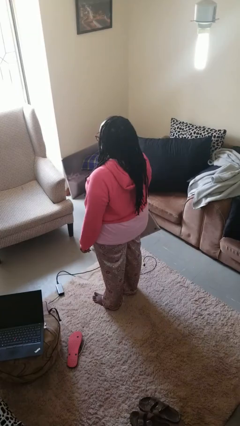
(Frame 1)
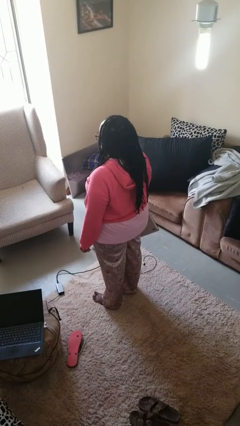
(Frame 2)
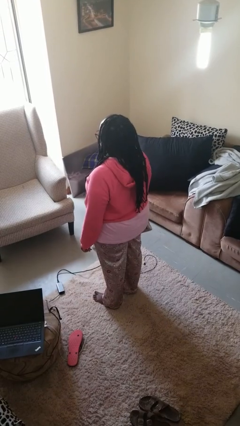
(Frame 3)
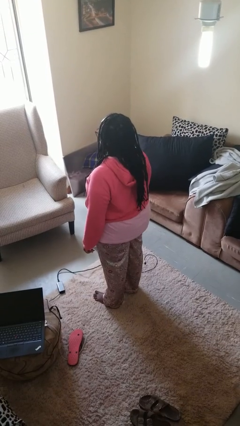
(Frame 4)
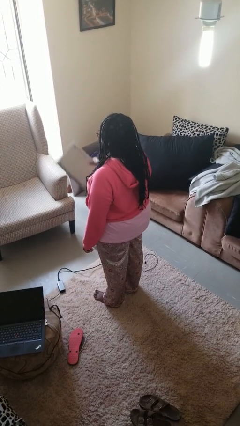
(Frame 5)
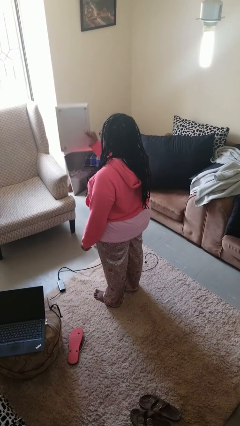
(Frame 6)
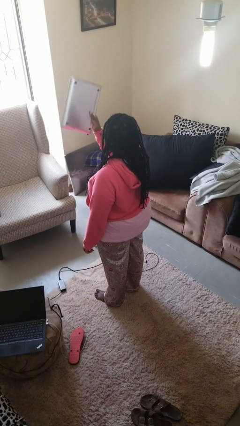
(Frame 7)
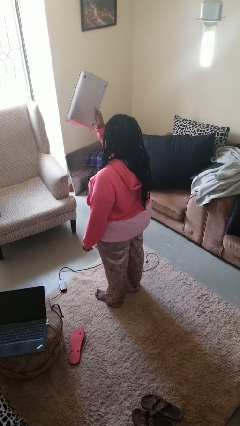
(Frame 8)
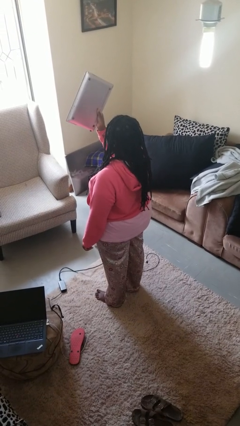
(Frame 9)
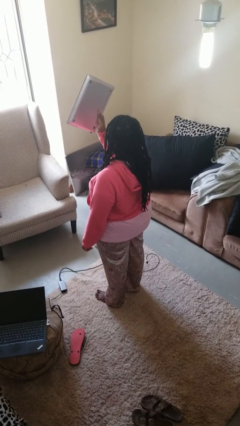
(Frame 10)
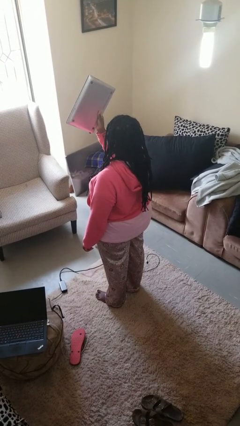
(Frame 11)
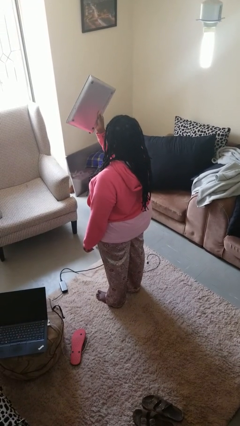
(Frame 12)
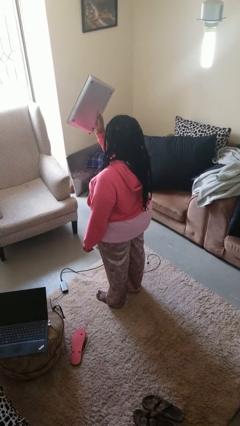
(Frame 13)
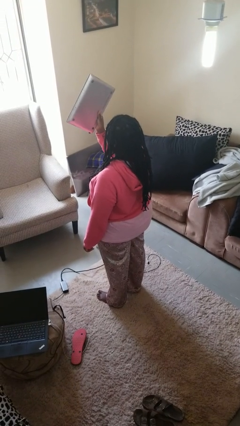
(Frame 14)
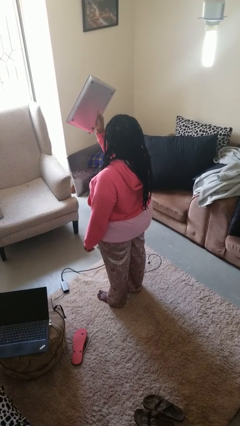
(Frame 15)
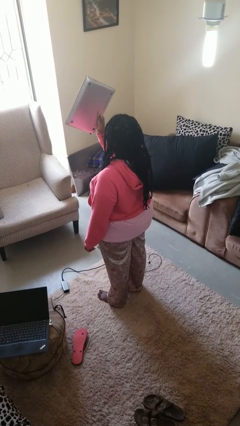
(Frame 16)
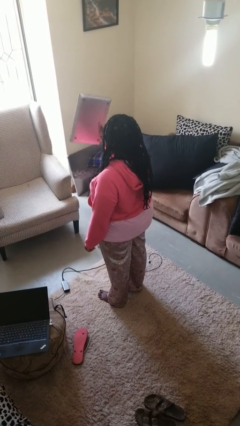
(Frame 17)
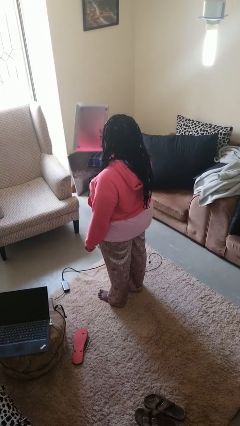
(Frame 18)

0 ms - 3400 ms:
person holds object above head

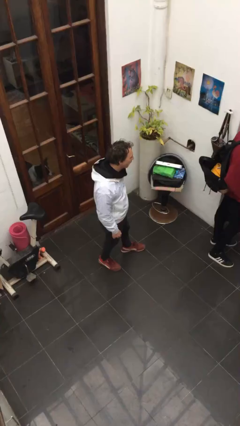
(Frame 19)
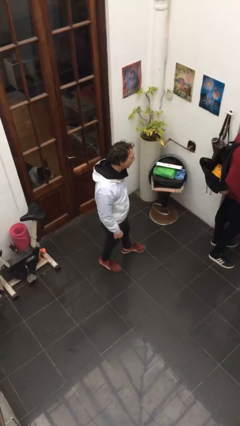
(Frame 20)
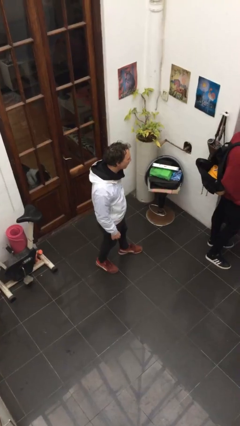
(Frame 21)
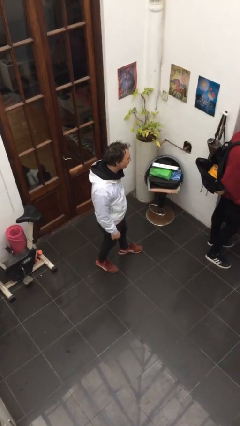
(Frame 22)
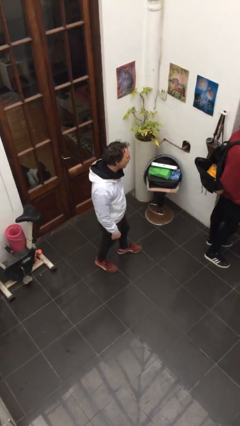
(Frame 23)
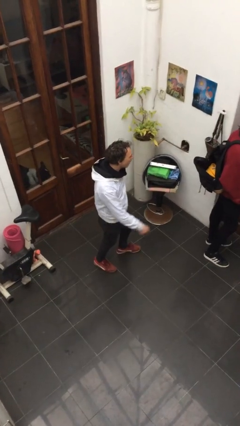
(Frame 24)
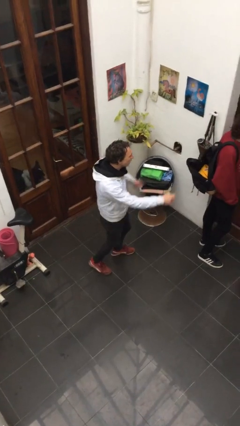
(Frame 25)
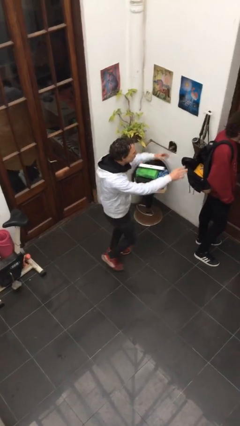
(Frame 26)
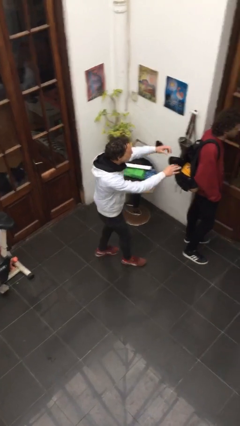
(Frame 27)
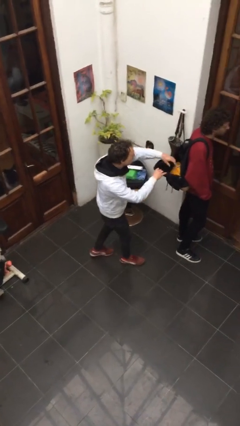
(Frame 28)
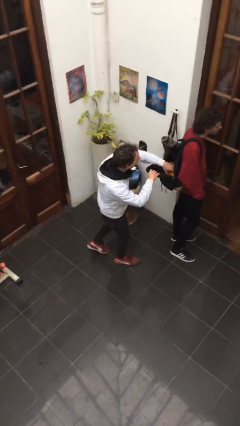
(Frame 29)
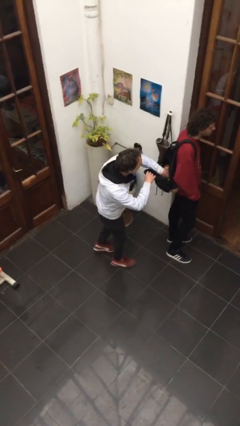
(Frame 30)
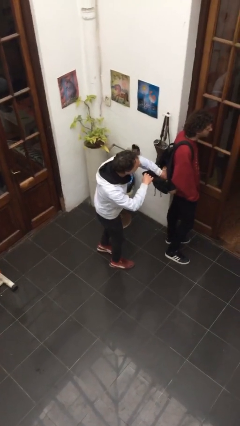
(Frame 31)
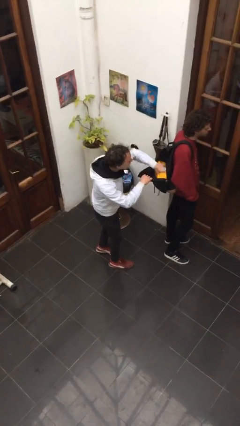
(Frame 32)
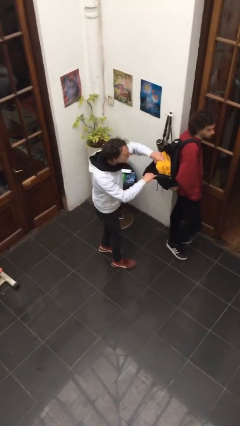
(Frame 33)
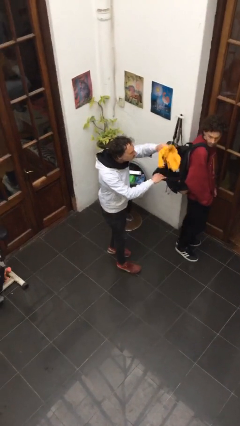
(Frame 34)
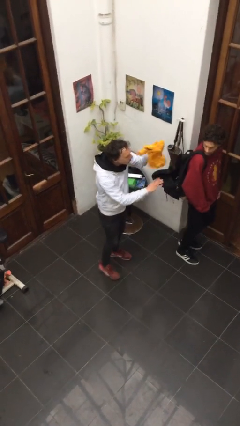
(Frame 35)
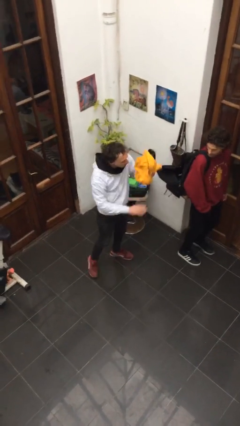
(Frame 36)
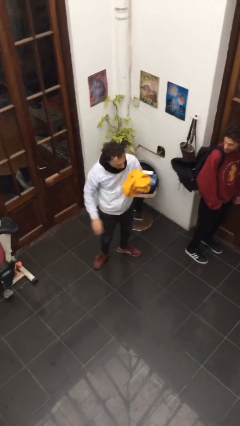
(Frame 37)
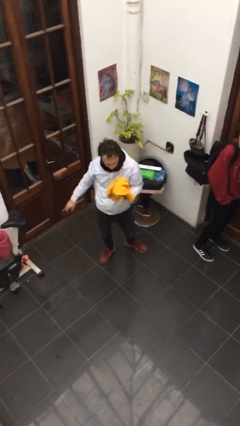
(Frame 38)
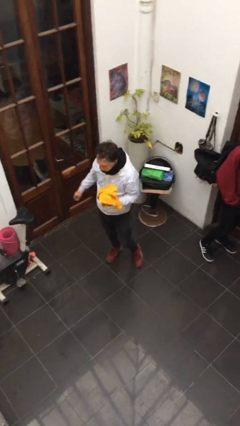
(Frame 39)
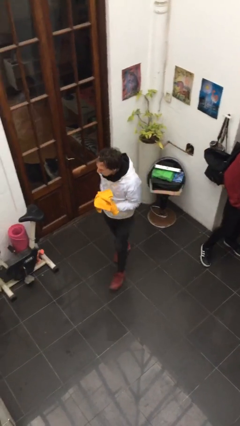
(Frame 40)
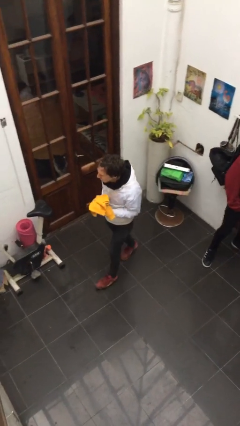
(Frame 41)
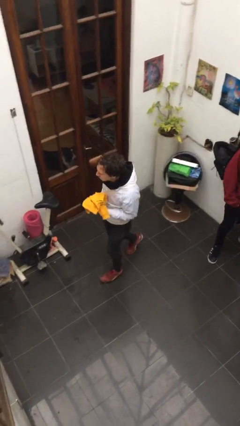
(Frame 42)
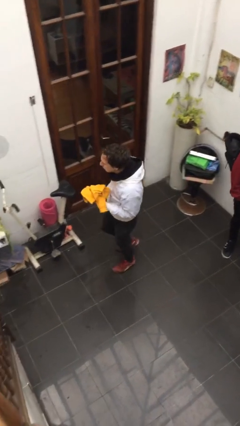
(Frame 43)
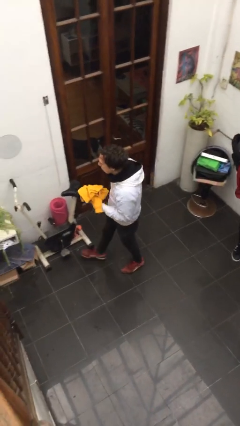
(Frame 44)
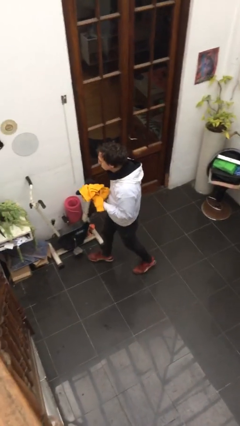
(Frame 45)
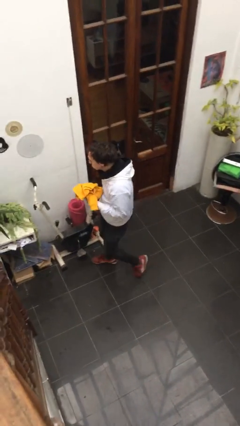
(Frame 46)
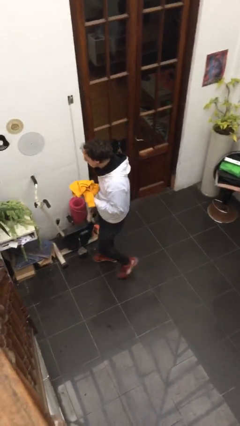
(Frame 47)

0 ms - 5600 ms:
person steals object from person

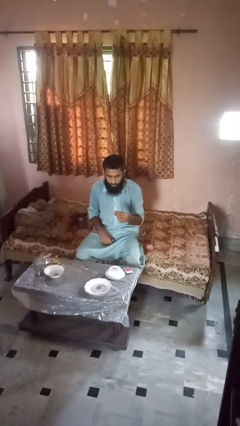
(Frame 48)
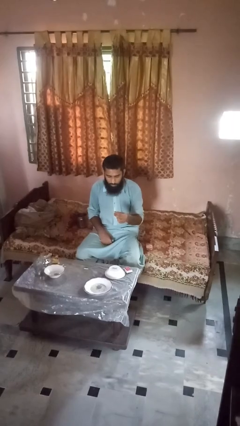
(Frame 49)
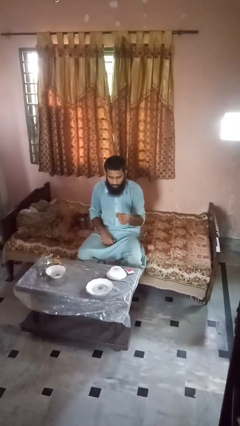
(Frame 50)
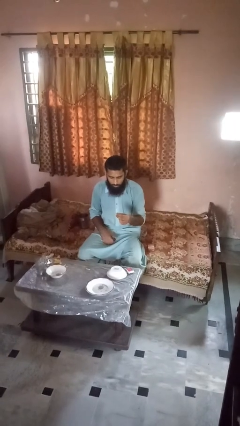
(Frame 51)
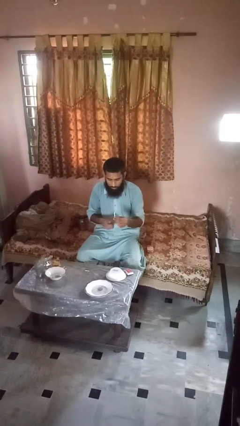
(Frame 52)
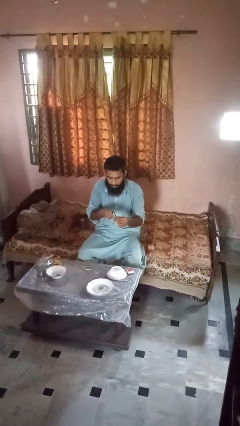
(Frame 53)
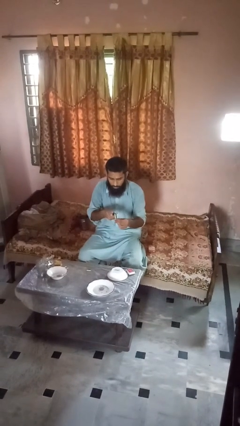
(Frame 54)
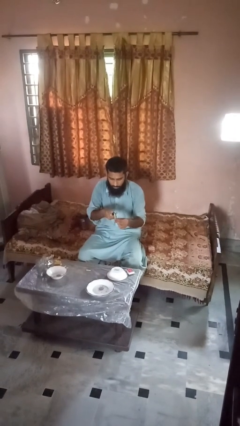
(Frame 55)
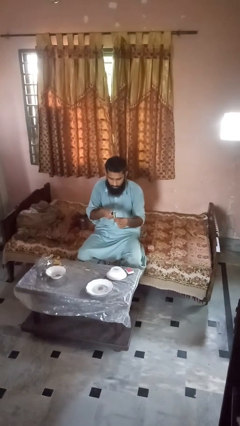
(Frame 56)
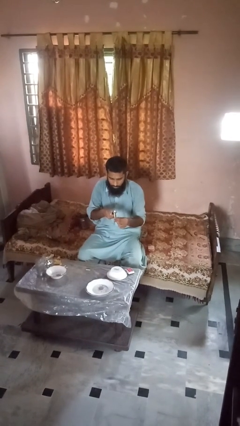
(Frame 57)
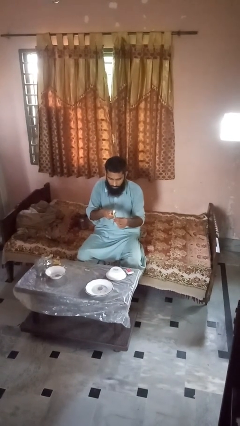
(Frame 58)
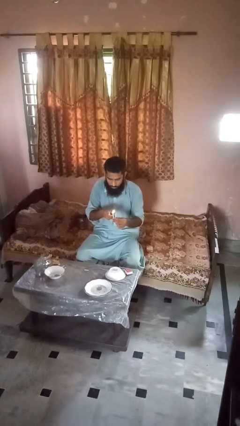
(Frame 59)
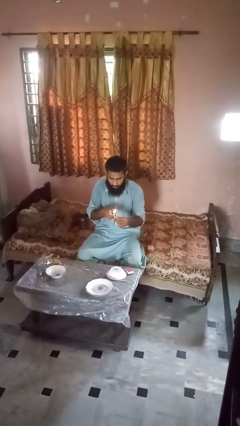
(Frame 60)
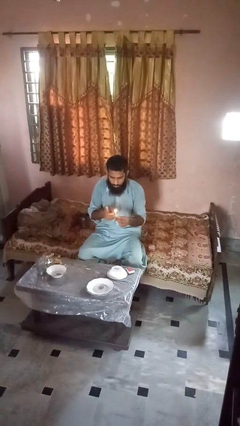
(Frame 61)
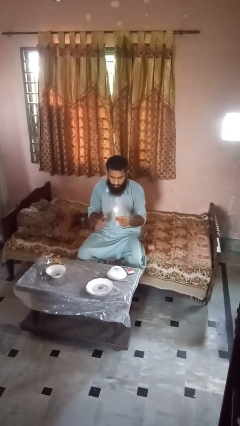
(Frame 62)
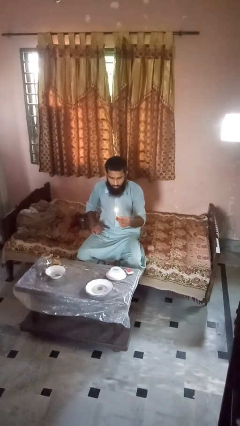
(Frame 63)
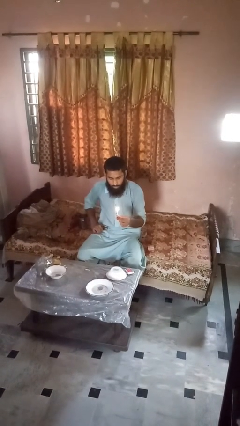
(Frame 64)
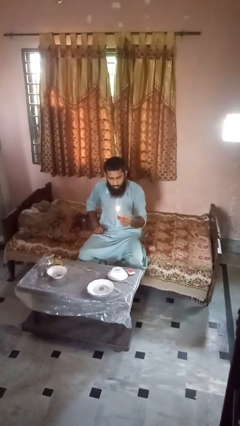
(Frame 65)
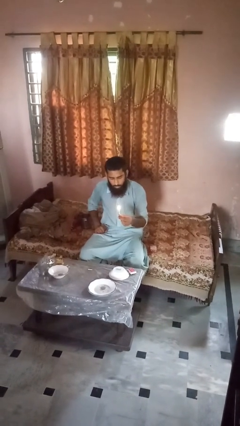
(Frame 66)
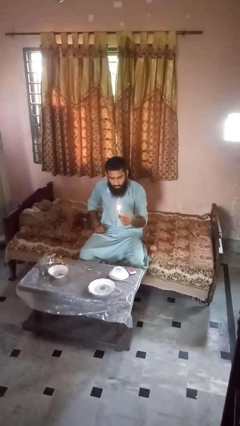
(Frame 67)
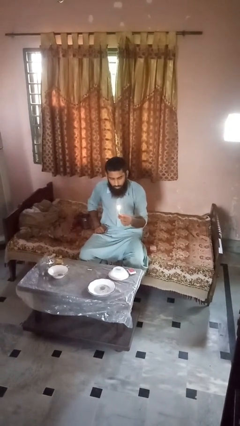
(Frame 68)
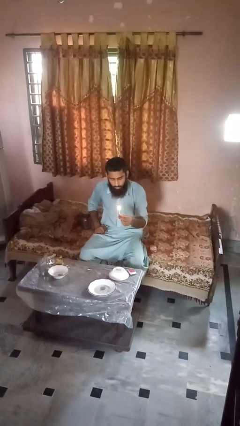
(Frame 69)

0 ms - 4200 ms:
person lights candle

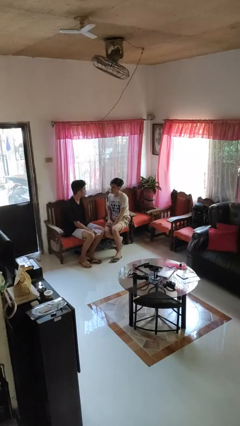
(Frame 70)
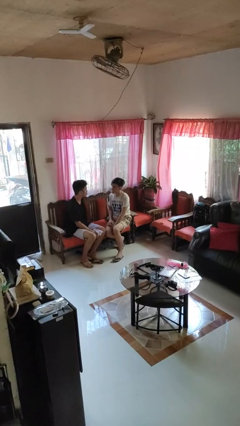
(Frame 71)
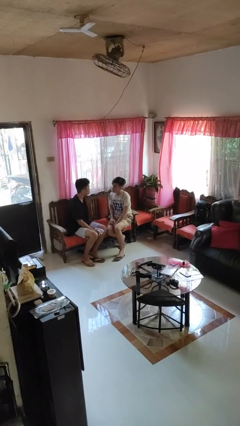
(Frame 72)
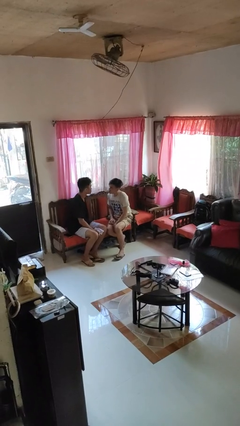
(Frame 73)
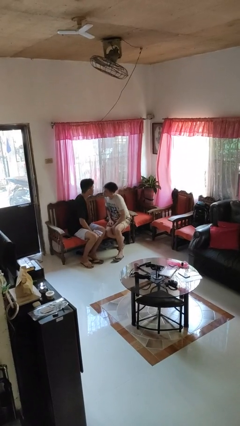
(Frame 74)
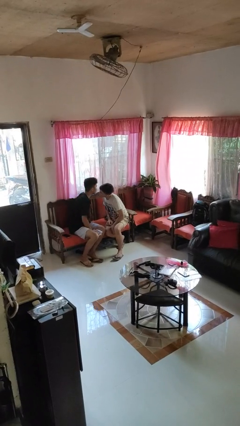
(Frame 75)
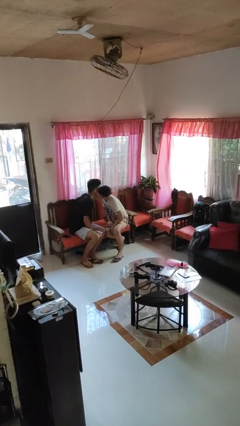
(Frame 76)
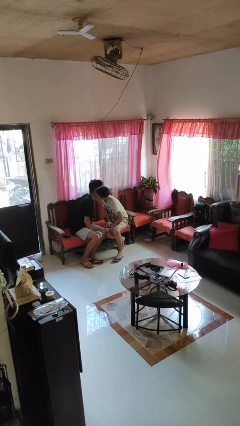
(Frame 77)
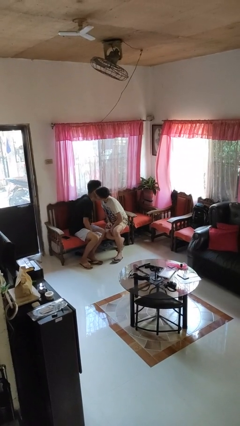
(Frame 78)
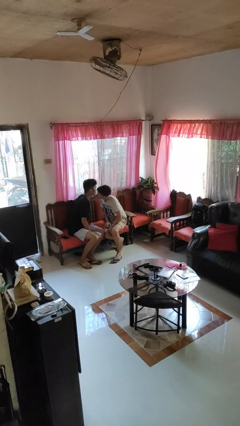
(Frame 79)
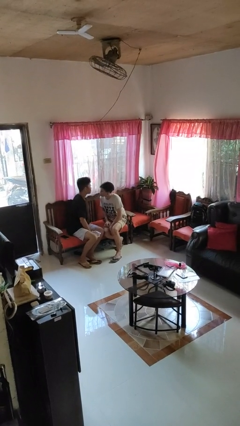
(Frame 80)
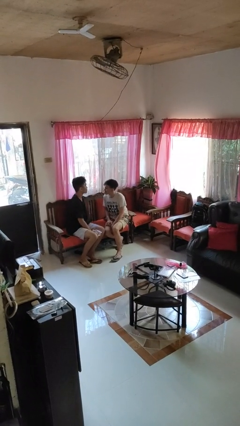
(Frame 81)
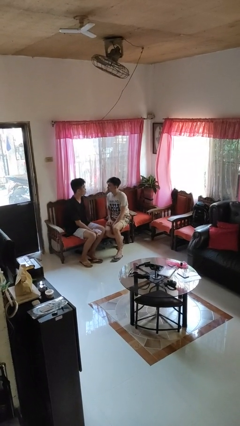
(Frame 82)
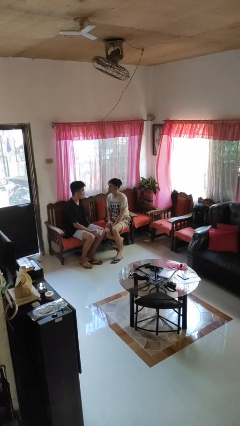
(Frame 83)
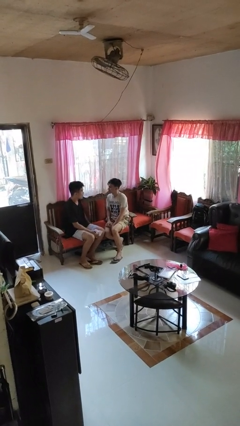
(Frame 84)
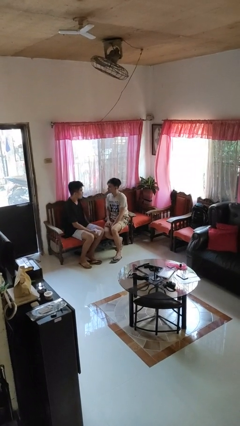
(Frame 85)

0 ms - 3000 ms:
person kisses cheek of person

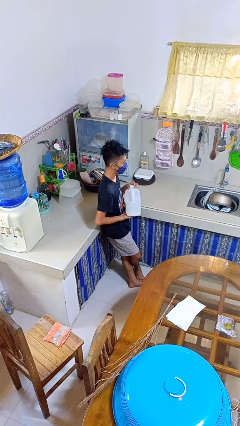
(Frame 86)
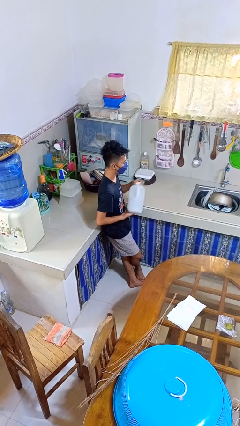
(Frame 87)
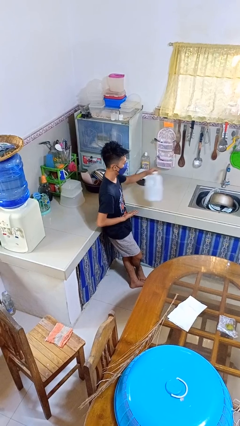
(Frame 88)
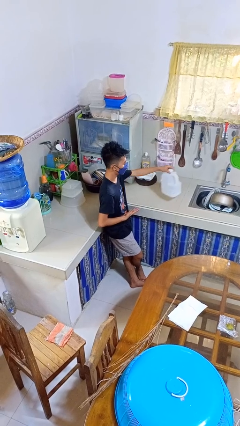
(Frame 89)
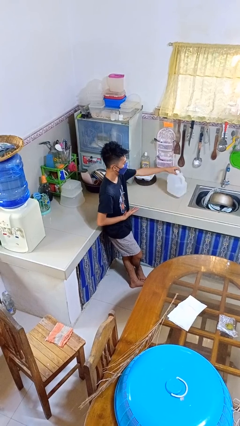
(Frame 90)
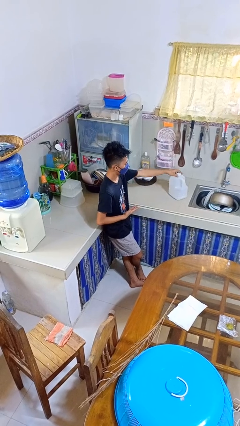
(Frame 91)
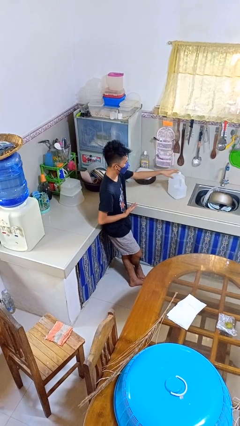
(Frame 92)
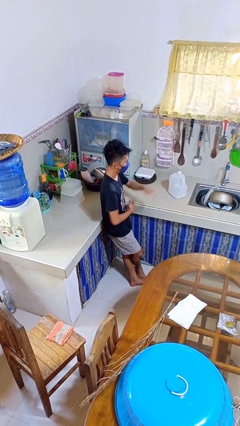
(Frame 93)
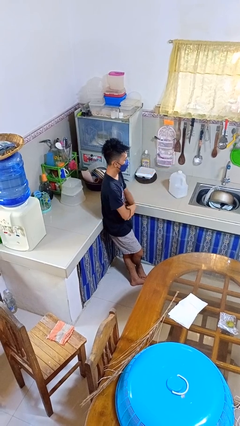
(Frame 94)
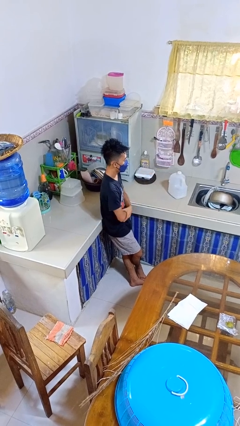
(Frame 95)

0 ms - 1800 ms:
person puts down object on countertop
